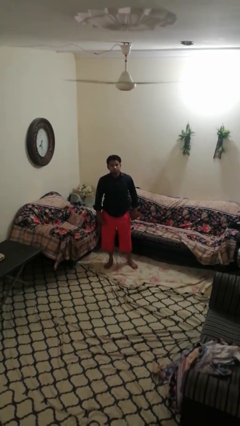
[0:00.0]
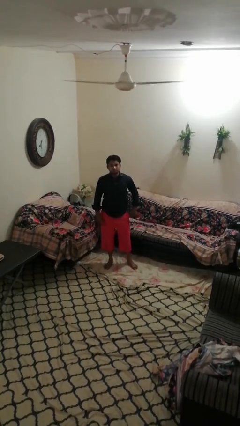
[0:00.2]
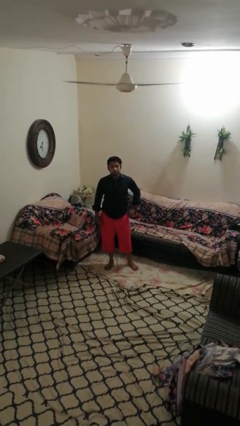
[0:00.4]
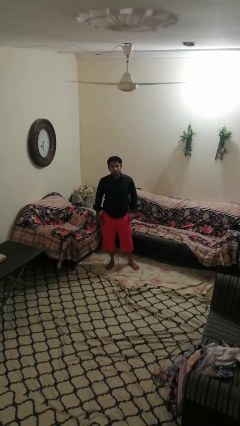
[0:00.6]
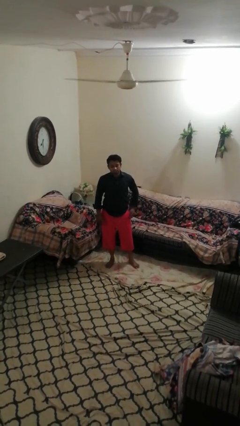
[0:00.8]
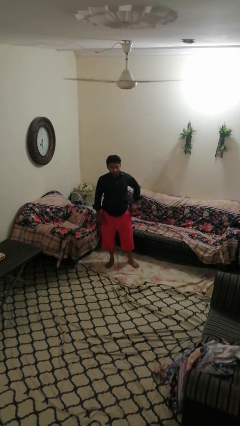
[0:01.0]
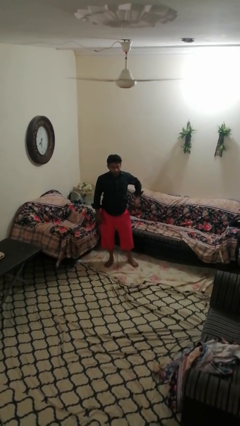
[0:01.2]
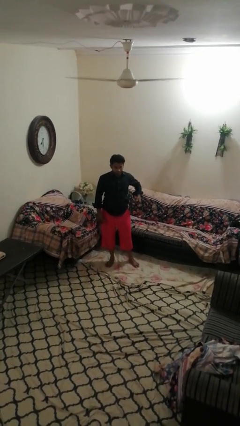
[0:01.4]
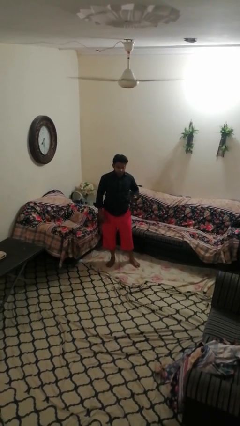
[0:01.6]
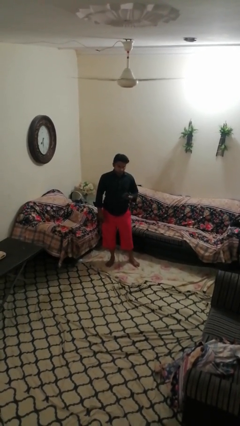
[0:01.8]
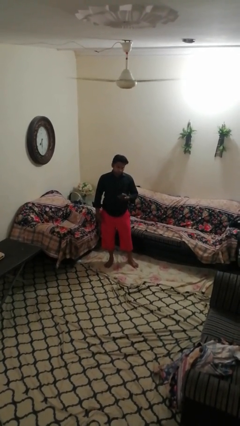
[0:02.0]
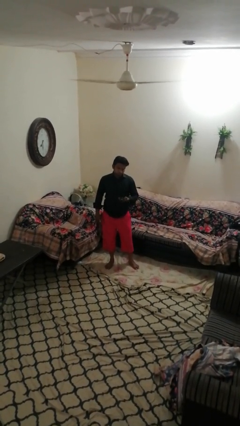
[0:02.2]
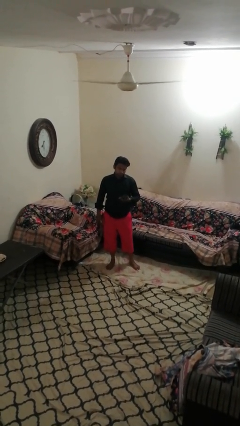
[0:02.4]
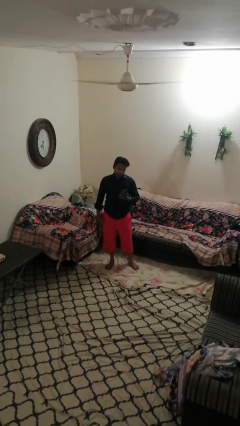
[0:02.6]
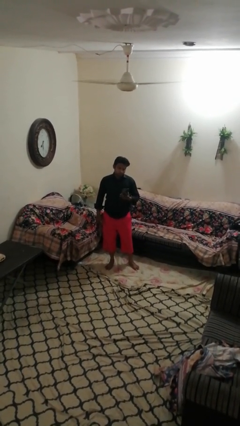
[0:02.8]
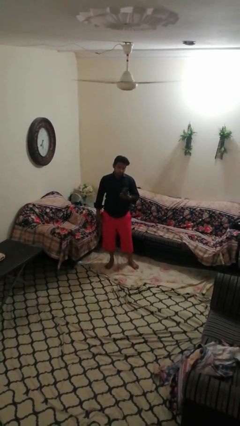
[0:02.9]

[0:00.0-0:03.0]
person takes phone from pocket

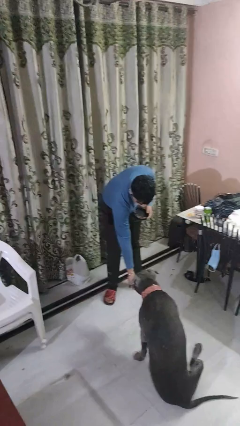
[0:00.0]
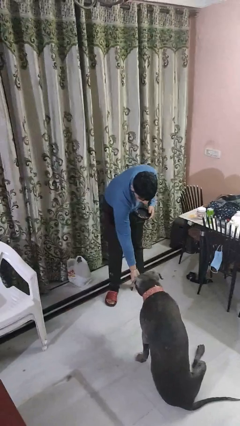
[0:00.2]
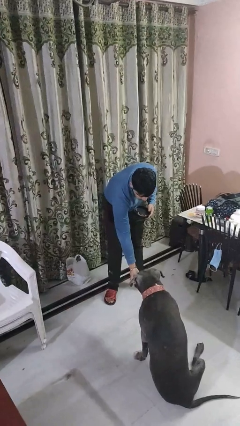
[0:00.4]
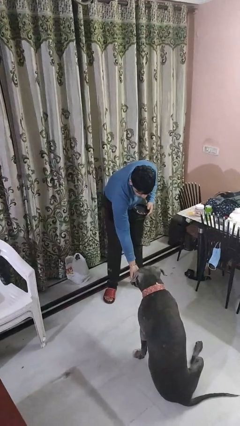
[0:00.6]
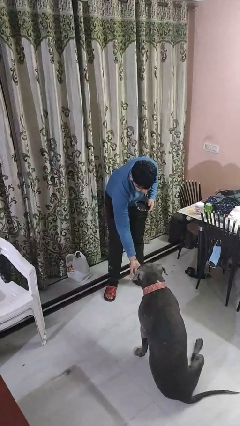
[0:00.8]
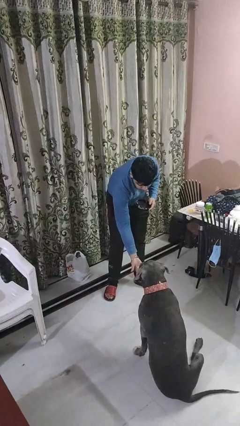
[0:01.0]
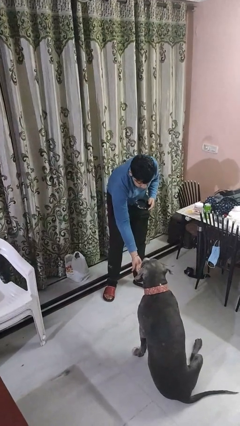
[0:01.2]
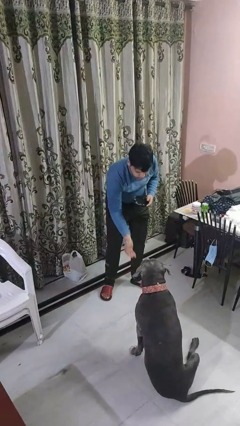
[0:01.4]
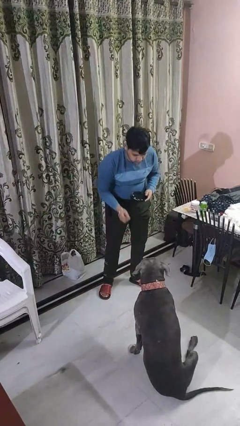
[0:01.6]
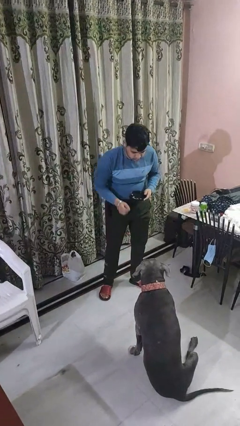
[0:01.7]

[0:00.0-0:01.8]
person feeds dog

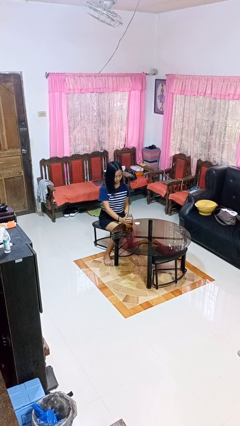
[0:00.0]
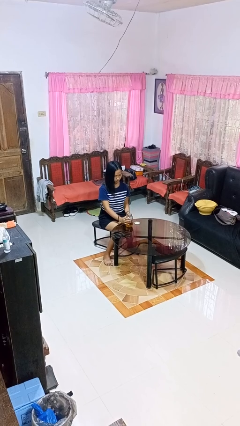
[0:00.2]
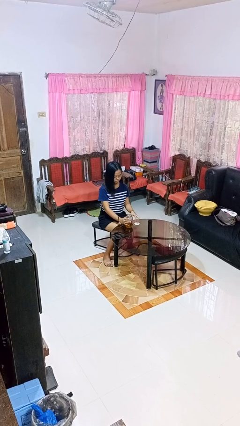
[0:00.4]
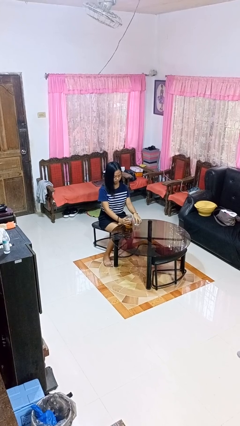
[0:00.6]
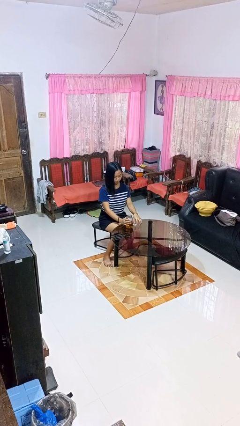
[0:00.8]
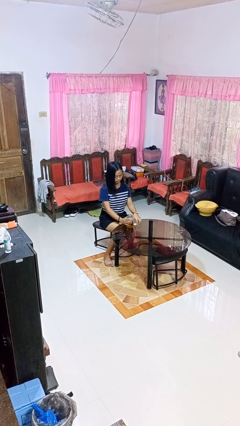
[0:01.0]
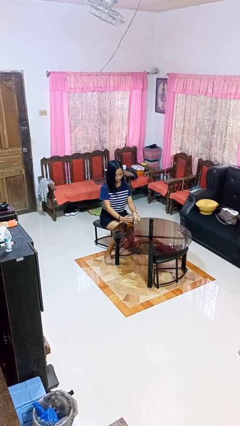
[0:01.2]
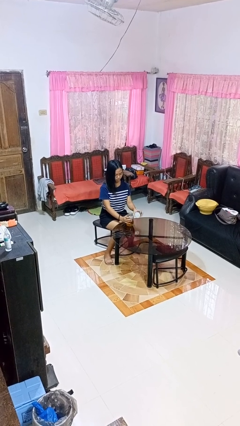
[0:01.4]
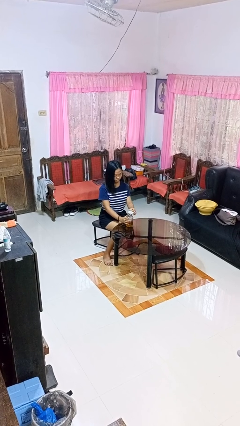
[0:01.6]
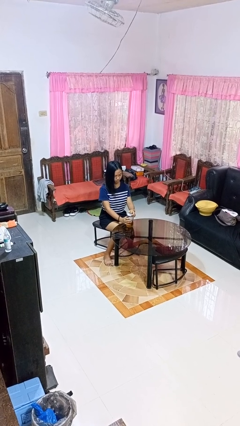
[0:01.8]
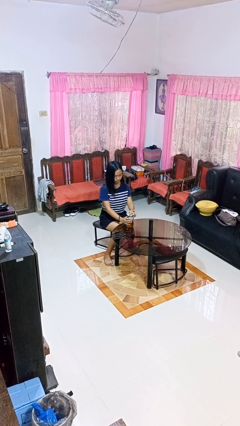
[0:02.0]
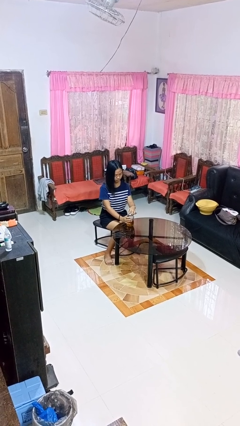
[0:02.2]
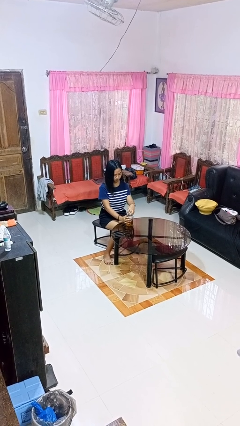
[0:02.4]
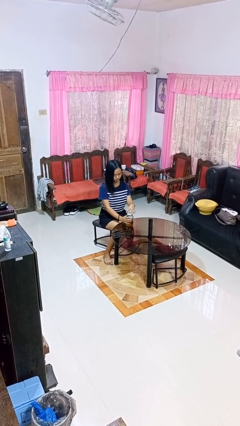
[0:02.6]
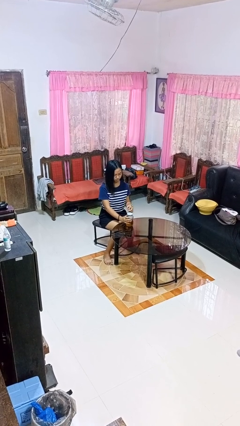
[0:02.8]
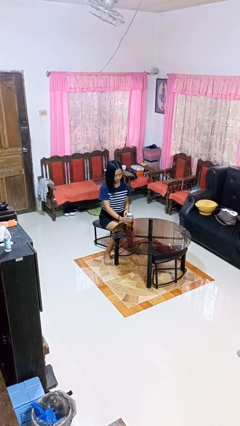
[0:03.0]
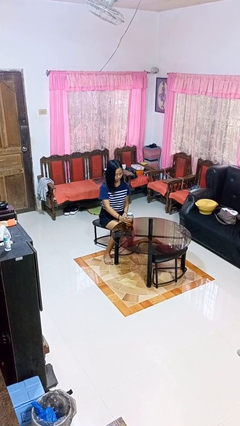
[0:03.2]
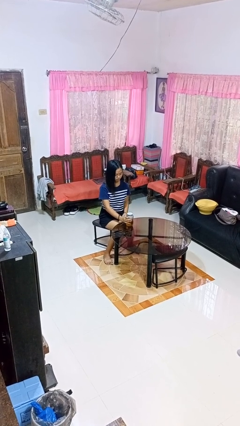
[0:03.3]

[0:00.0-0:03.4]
person closes jar

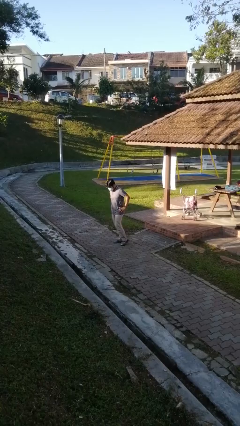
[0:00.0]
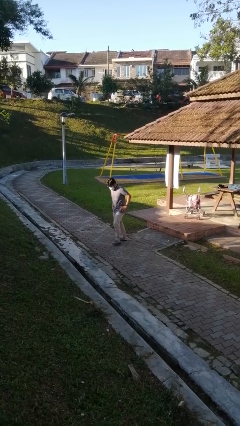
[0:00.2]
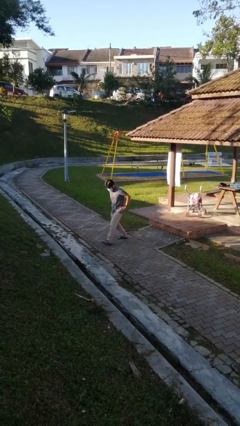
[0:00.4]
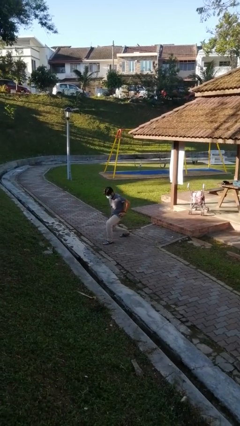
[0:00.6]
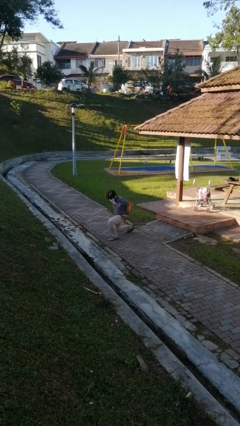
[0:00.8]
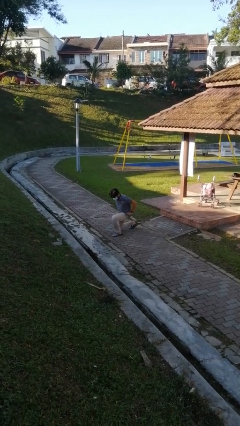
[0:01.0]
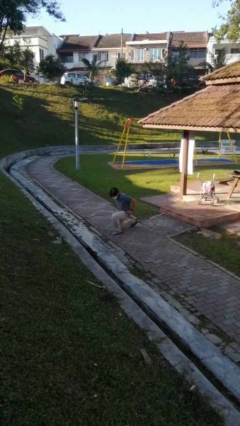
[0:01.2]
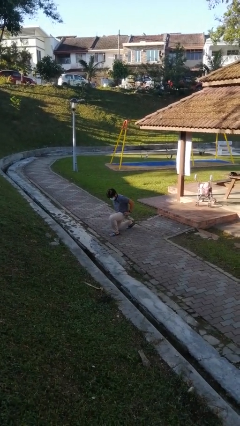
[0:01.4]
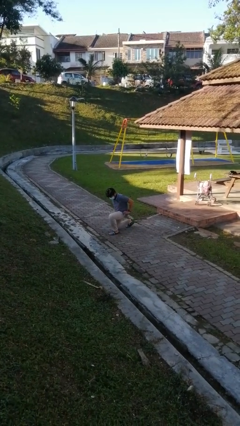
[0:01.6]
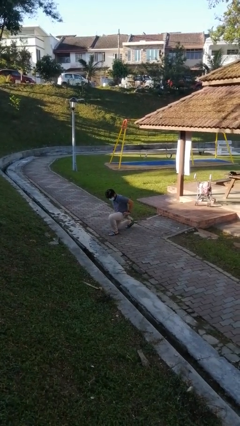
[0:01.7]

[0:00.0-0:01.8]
person kneels

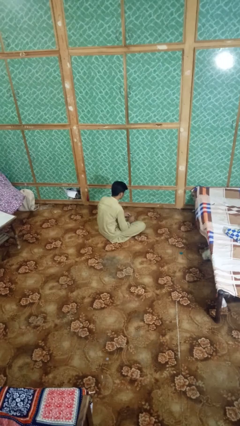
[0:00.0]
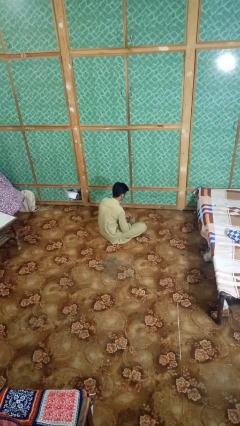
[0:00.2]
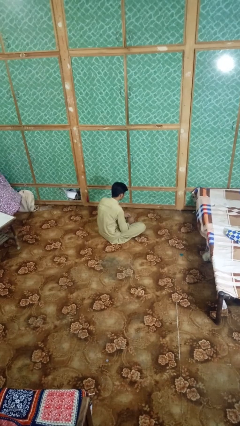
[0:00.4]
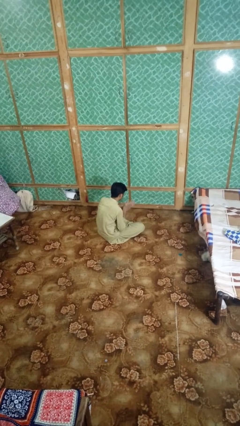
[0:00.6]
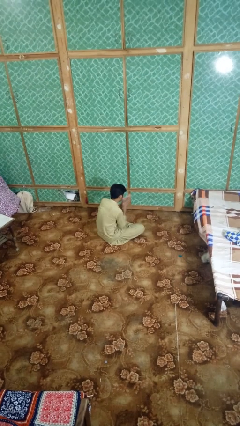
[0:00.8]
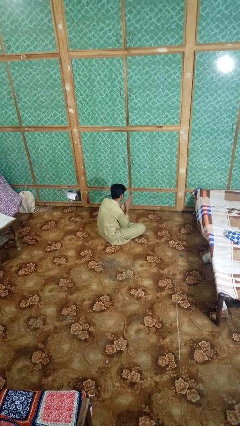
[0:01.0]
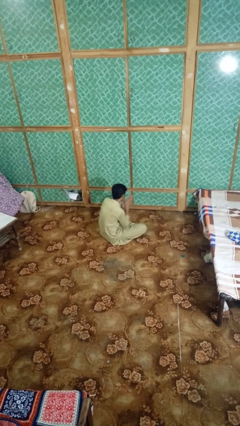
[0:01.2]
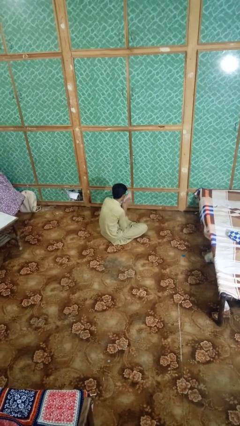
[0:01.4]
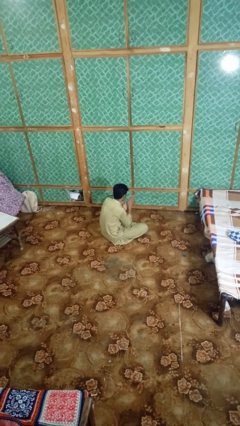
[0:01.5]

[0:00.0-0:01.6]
person blows into hands

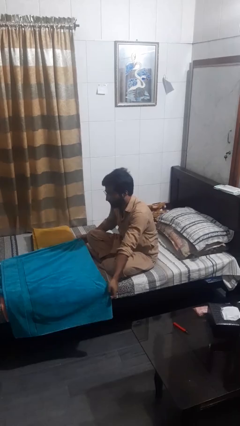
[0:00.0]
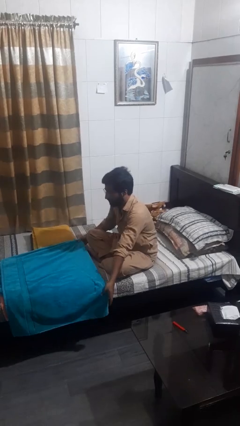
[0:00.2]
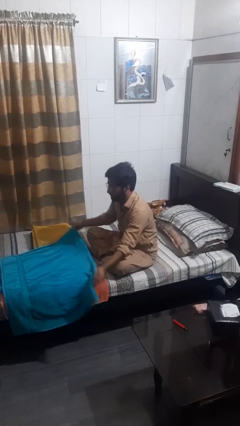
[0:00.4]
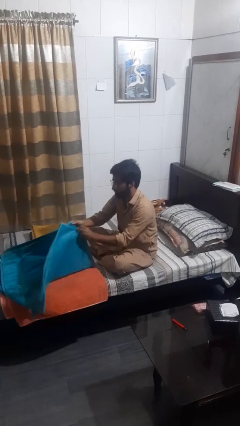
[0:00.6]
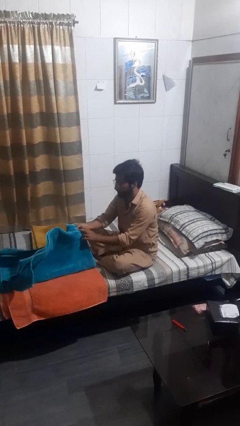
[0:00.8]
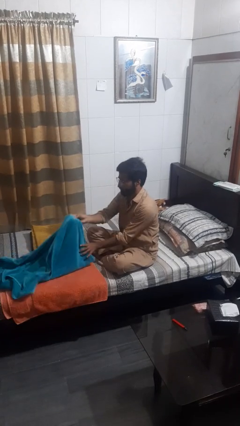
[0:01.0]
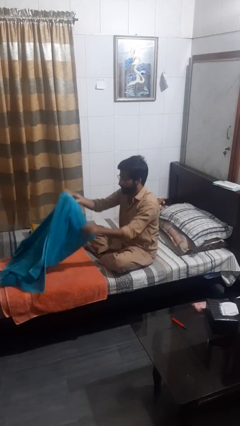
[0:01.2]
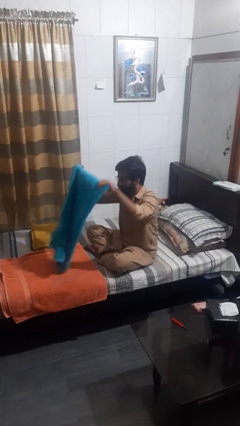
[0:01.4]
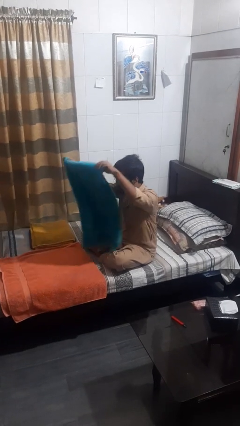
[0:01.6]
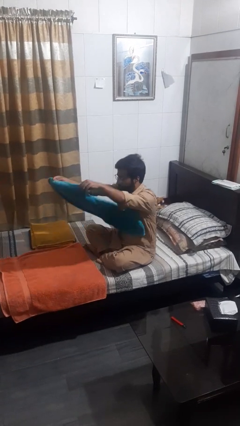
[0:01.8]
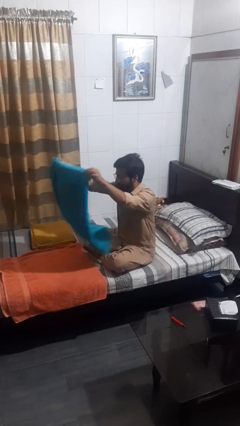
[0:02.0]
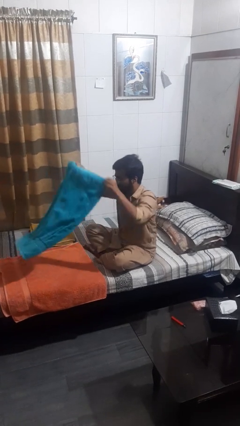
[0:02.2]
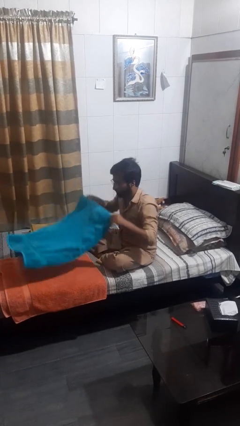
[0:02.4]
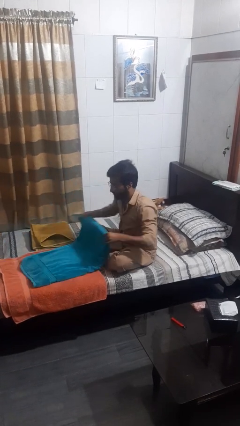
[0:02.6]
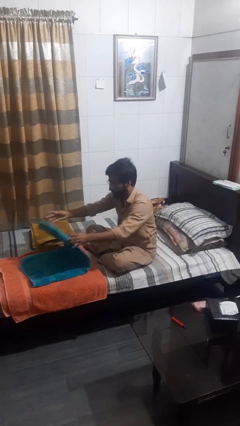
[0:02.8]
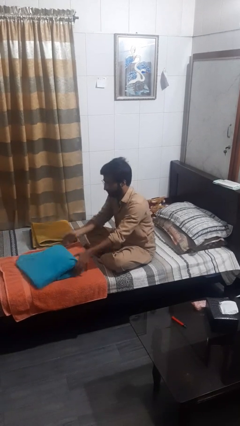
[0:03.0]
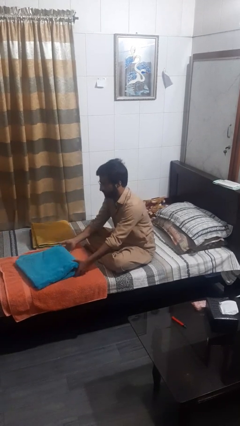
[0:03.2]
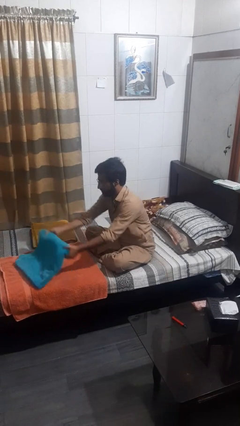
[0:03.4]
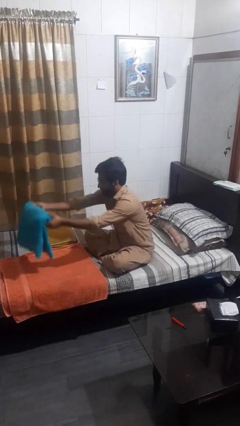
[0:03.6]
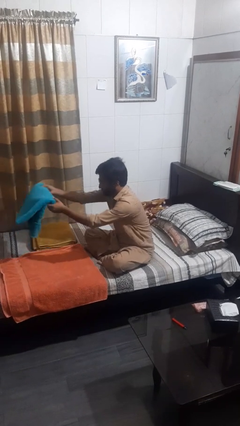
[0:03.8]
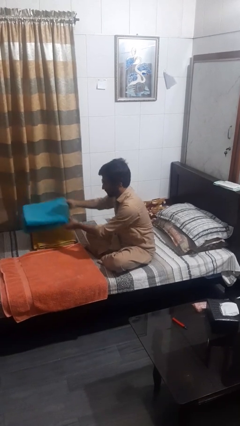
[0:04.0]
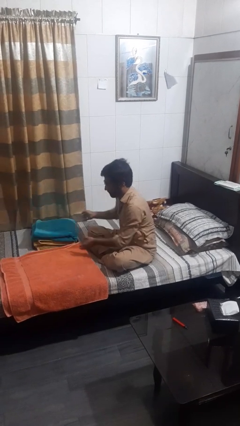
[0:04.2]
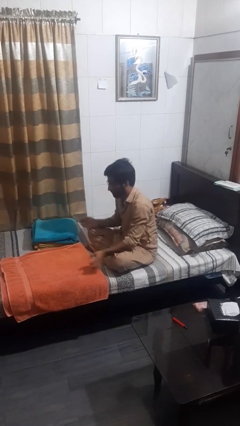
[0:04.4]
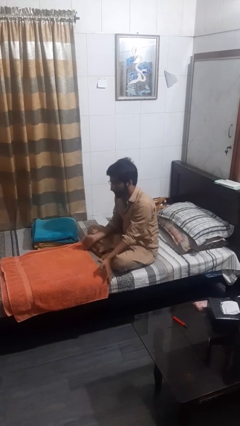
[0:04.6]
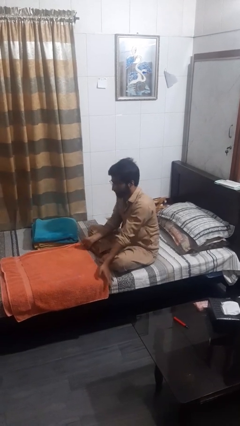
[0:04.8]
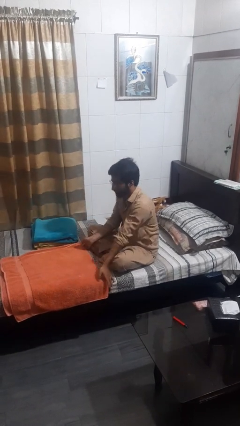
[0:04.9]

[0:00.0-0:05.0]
person folds towel

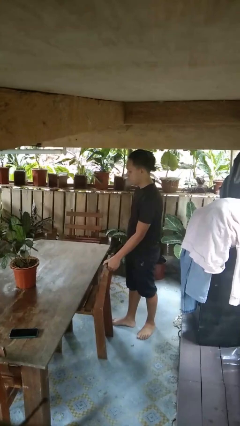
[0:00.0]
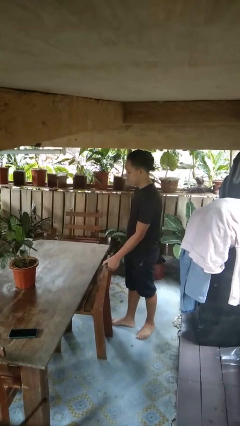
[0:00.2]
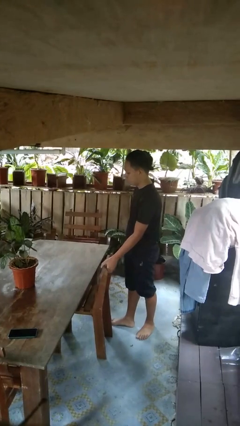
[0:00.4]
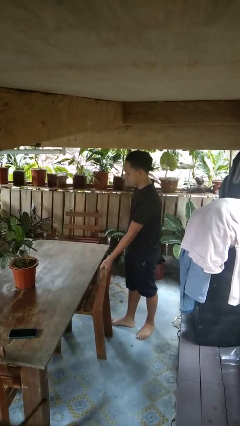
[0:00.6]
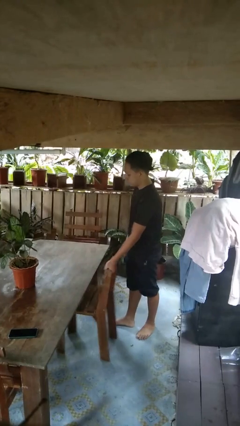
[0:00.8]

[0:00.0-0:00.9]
person pulls out chair
